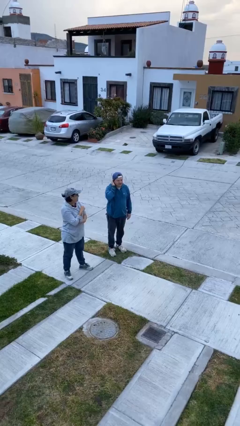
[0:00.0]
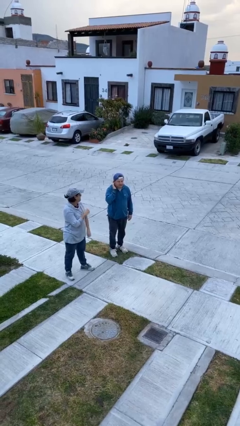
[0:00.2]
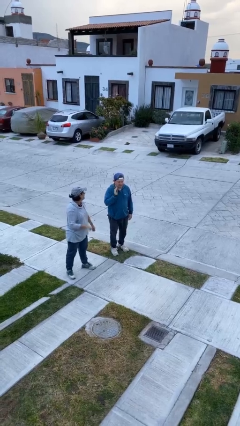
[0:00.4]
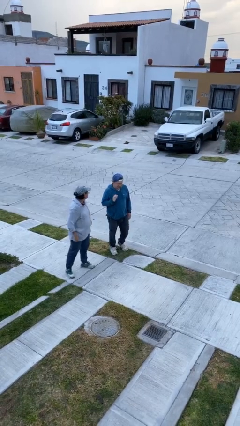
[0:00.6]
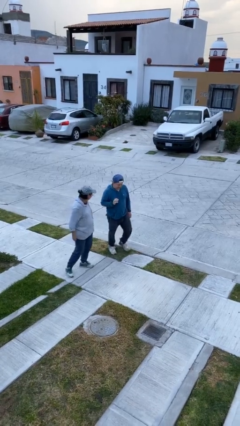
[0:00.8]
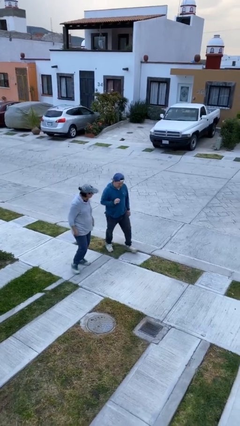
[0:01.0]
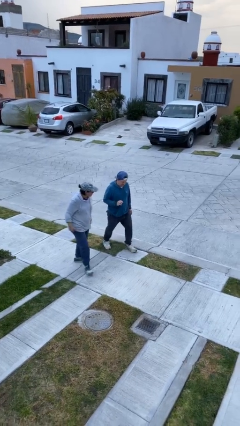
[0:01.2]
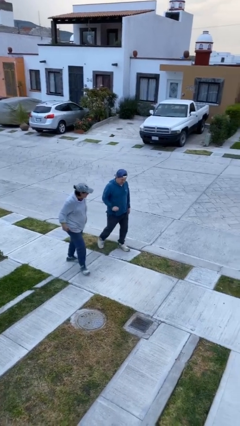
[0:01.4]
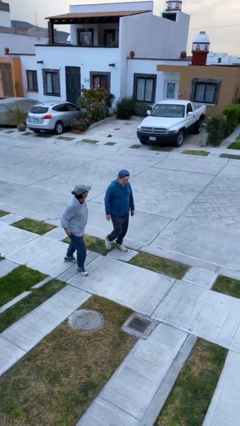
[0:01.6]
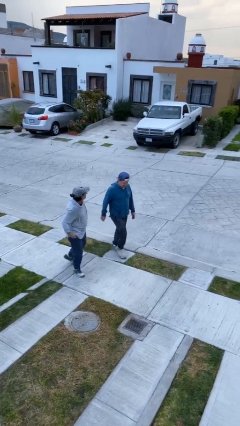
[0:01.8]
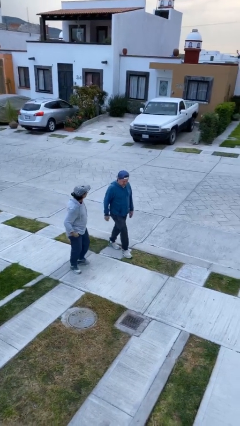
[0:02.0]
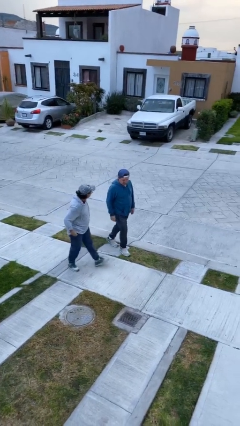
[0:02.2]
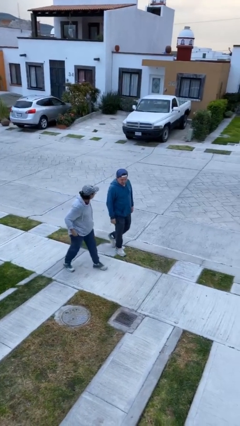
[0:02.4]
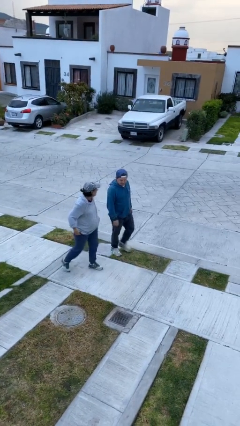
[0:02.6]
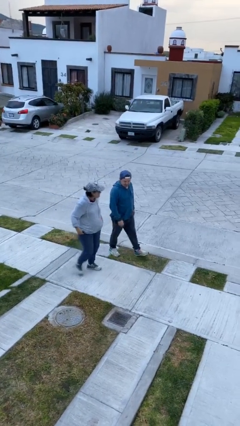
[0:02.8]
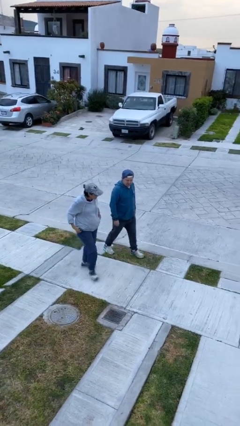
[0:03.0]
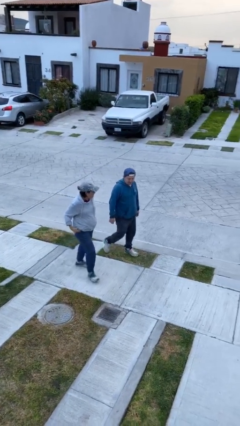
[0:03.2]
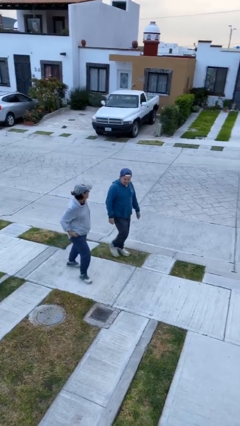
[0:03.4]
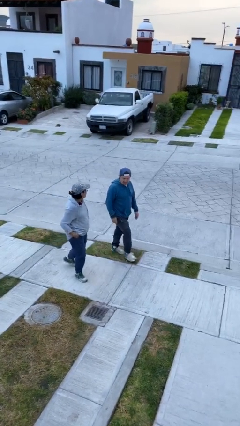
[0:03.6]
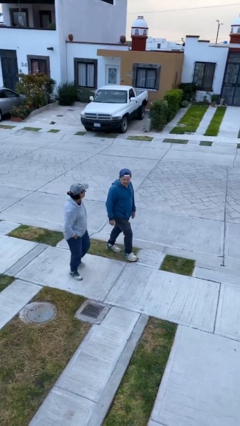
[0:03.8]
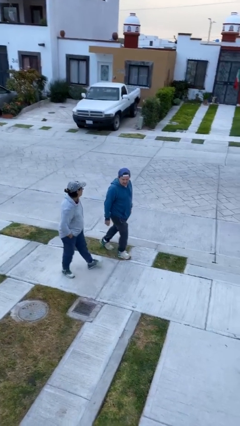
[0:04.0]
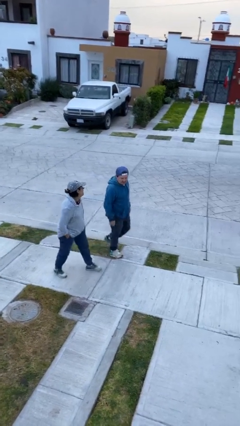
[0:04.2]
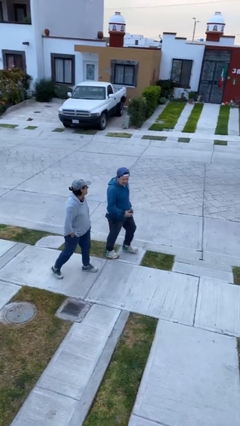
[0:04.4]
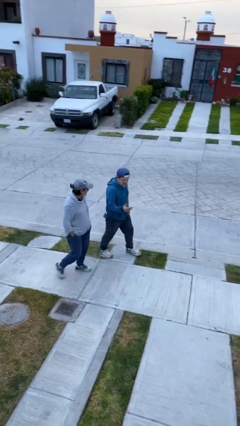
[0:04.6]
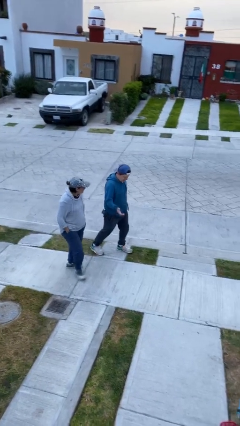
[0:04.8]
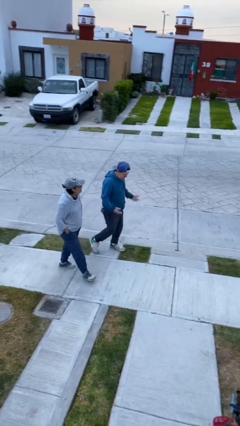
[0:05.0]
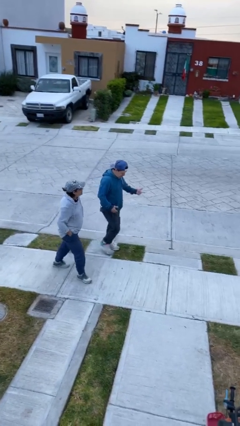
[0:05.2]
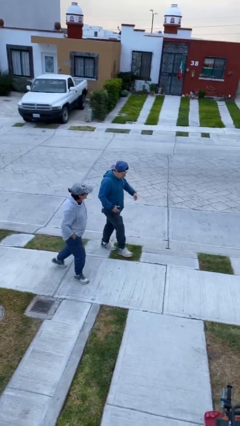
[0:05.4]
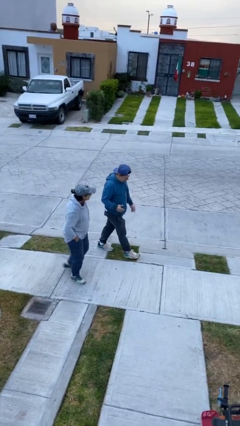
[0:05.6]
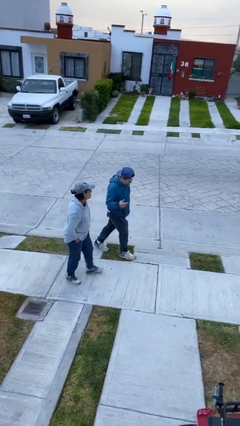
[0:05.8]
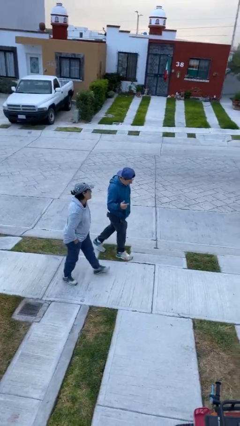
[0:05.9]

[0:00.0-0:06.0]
person talks to person

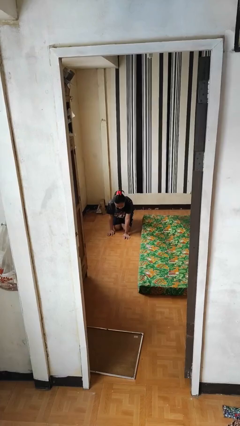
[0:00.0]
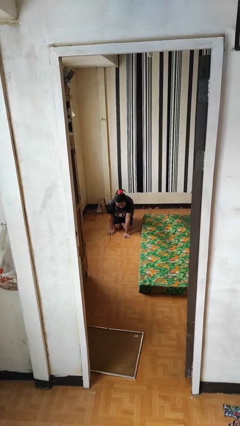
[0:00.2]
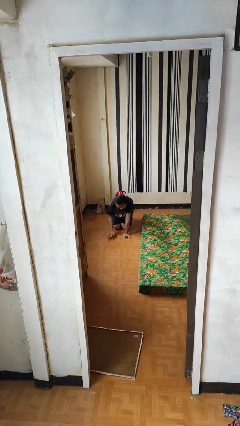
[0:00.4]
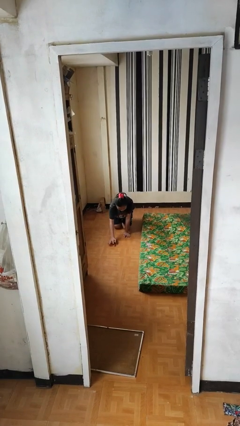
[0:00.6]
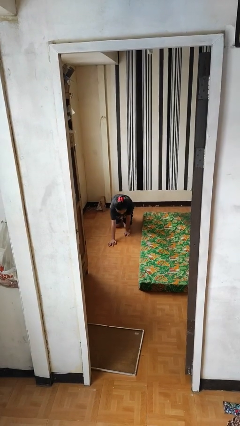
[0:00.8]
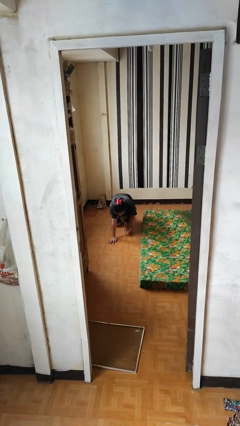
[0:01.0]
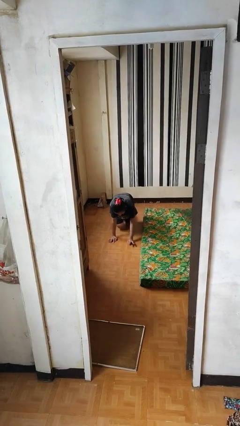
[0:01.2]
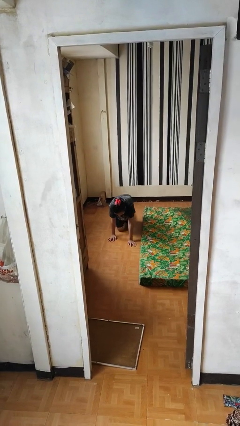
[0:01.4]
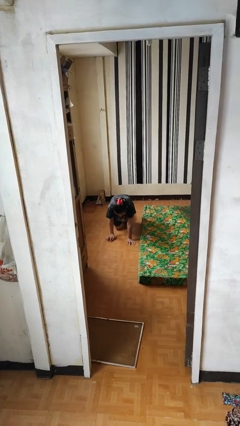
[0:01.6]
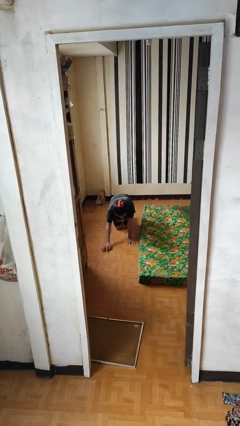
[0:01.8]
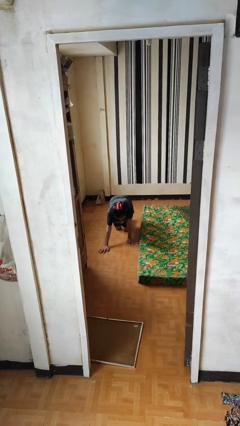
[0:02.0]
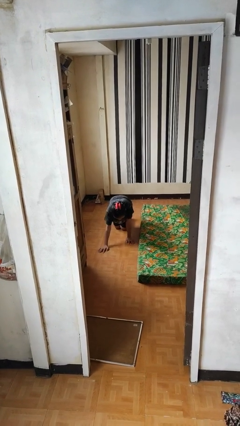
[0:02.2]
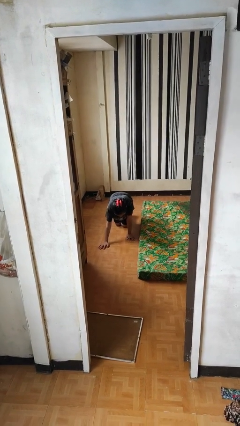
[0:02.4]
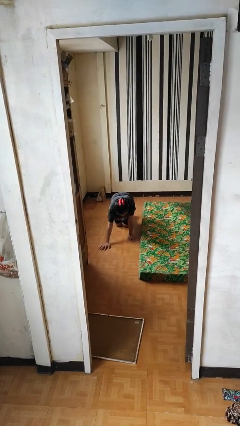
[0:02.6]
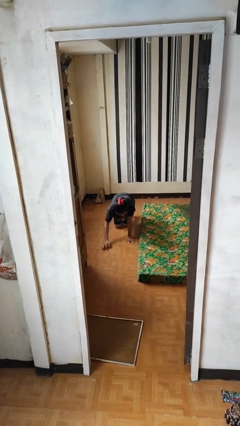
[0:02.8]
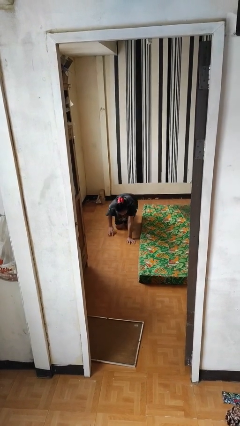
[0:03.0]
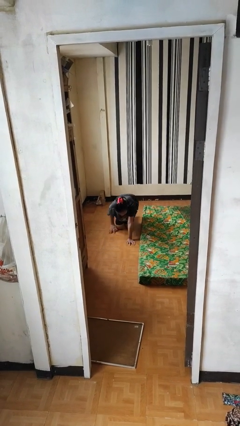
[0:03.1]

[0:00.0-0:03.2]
person crawls

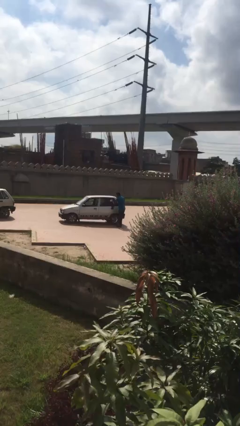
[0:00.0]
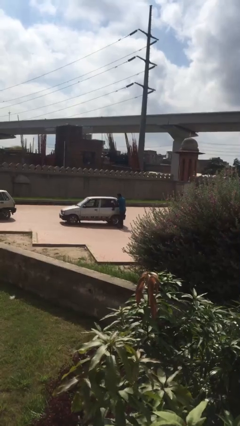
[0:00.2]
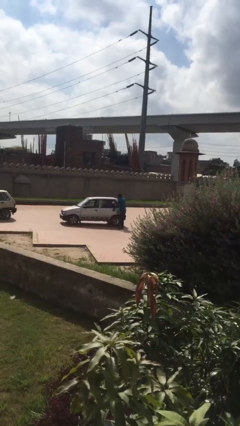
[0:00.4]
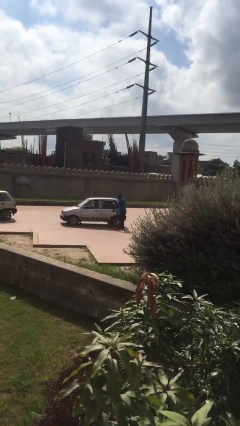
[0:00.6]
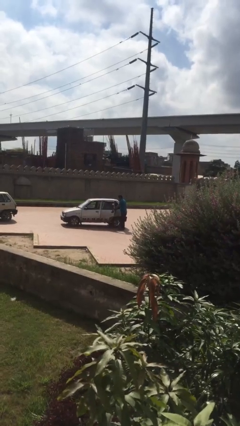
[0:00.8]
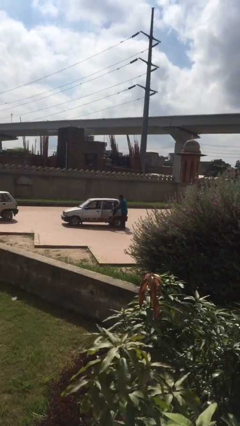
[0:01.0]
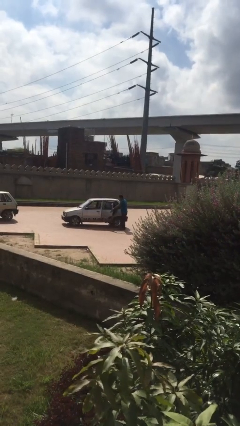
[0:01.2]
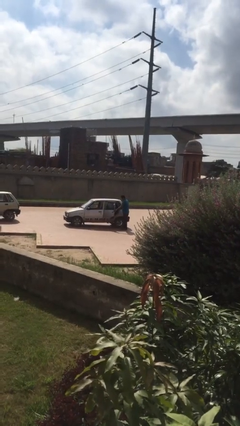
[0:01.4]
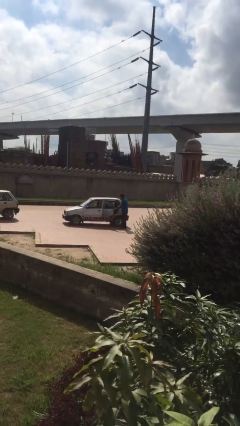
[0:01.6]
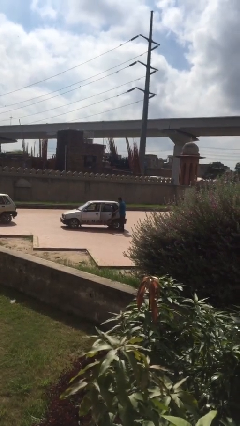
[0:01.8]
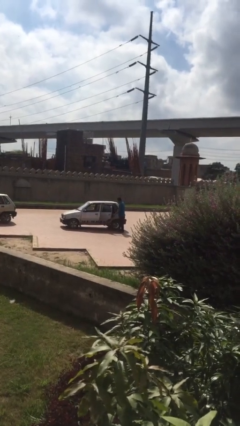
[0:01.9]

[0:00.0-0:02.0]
person opens car door

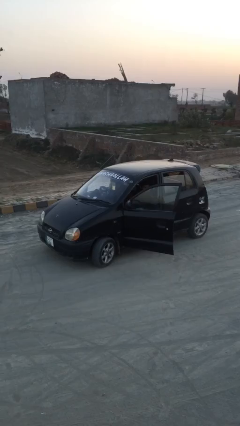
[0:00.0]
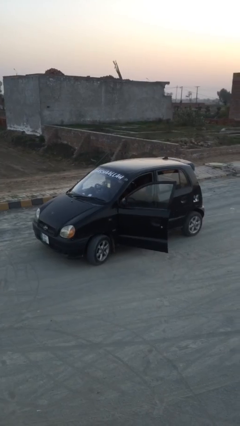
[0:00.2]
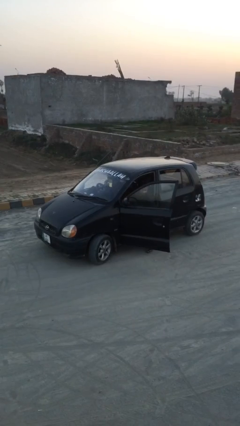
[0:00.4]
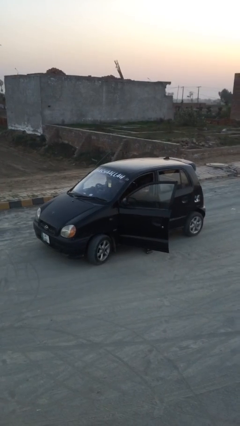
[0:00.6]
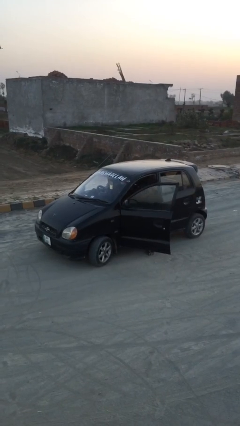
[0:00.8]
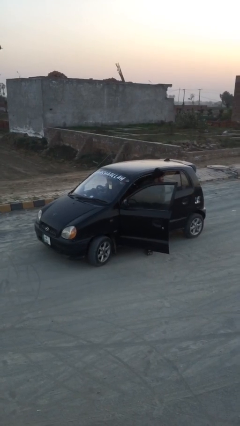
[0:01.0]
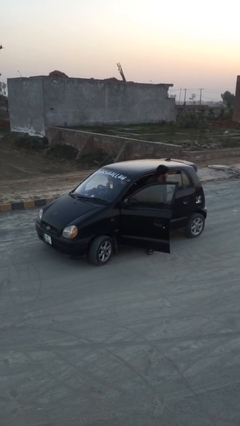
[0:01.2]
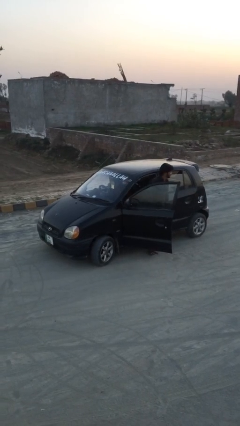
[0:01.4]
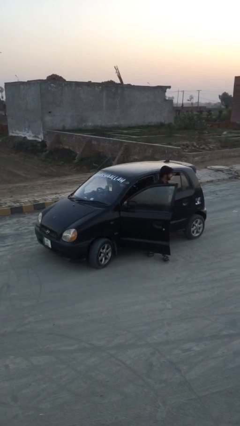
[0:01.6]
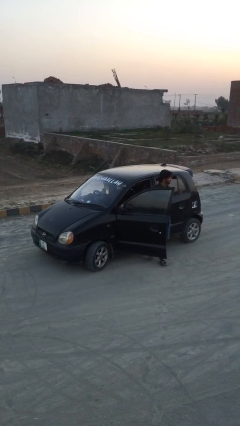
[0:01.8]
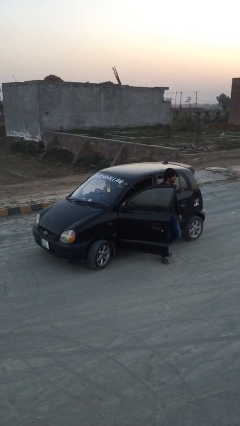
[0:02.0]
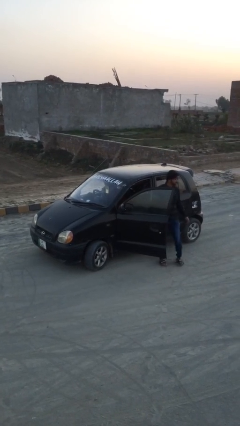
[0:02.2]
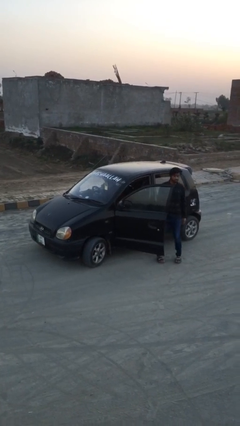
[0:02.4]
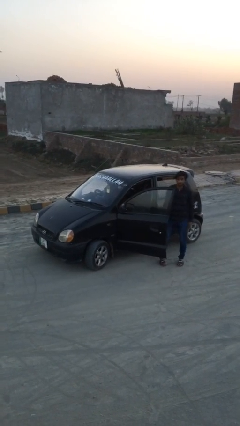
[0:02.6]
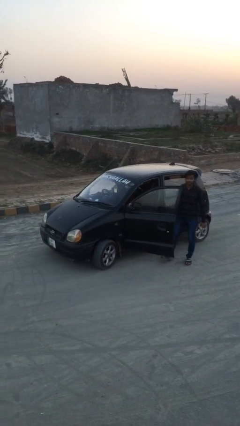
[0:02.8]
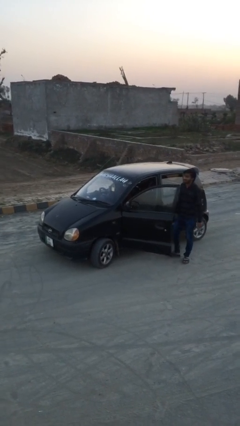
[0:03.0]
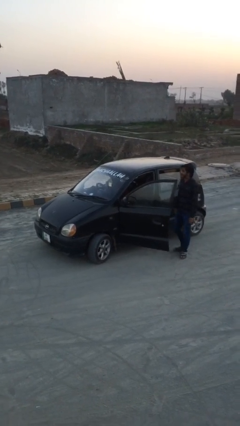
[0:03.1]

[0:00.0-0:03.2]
car drops off person

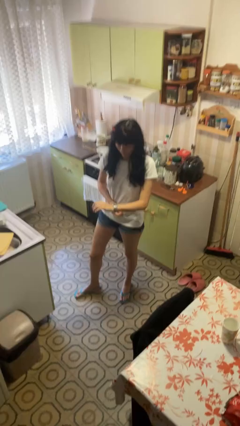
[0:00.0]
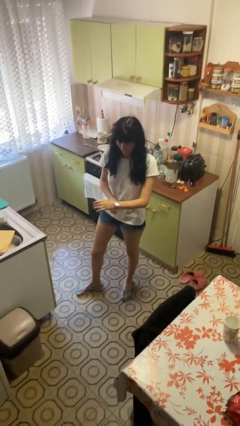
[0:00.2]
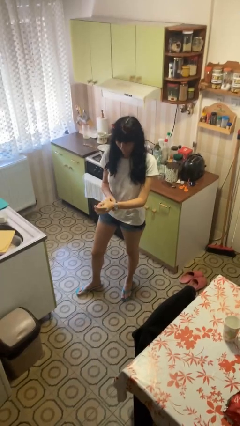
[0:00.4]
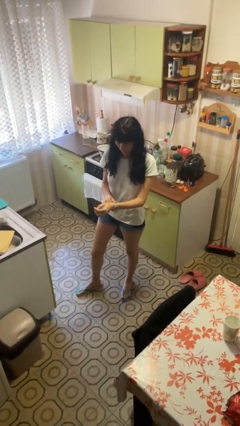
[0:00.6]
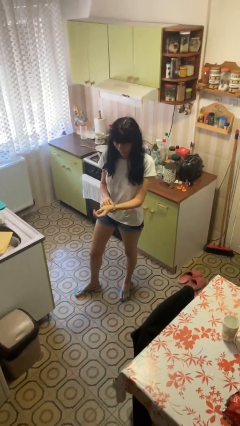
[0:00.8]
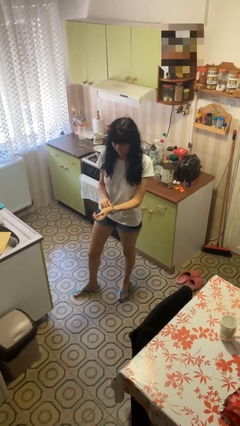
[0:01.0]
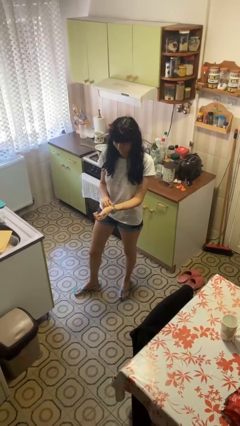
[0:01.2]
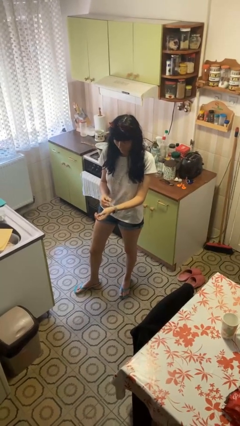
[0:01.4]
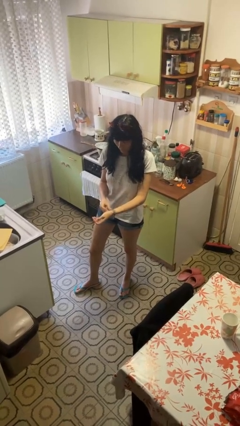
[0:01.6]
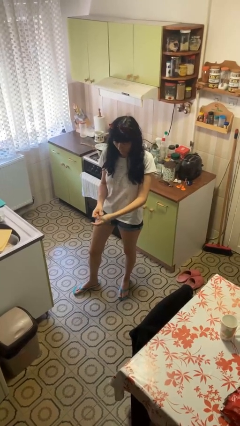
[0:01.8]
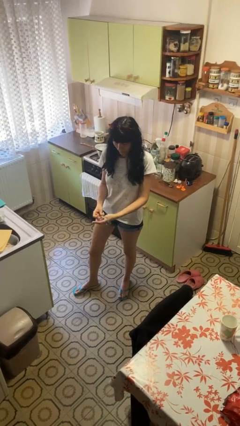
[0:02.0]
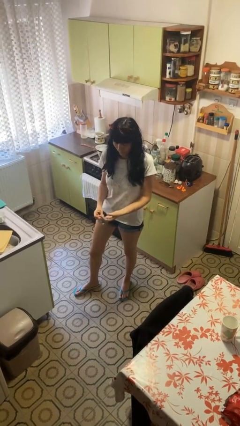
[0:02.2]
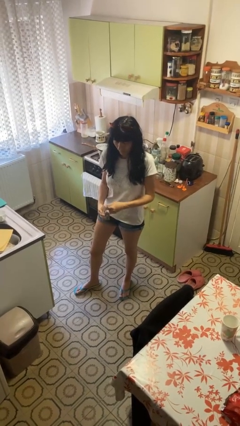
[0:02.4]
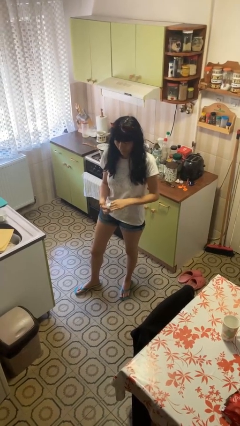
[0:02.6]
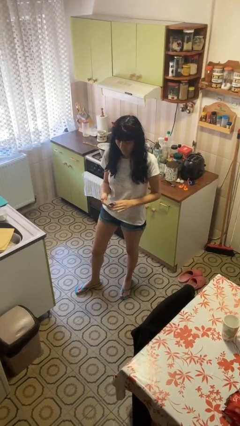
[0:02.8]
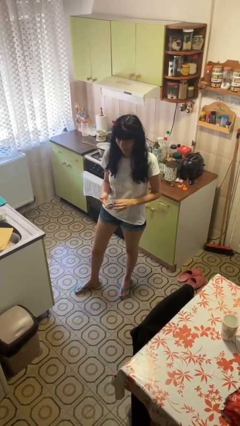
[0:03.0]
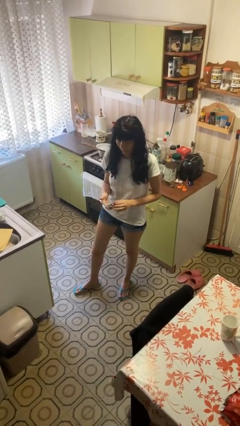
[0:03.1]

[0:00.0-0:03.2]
person takes off wristwatch

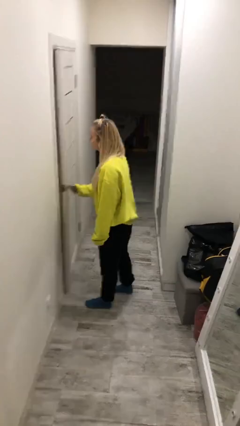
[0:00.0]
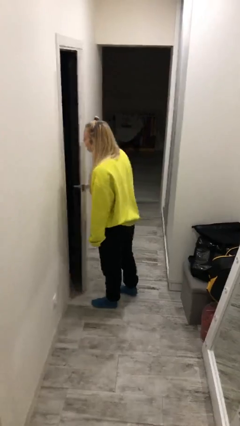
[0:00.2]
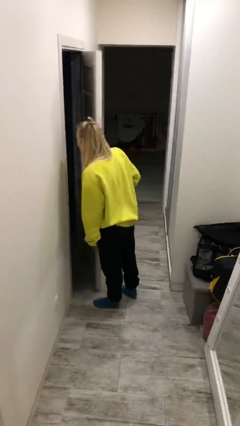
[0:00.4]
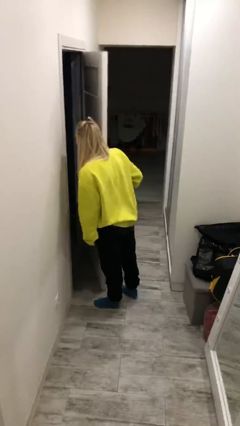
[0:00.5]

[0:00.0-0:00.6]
person opens facility door
